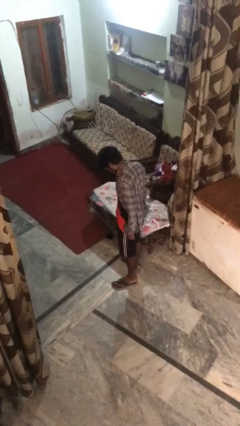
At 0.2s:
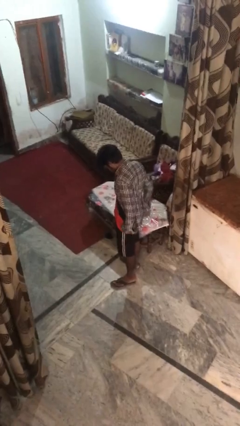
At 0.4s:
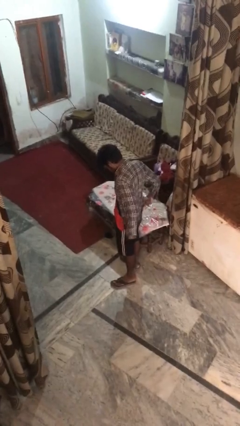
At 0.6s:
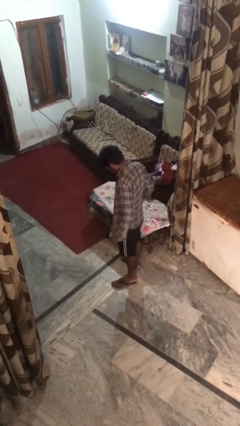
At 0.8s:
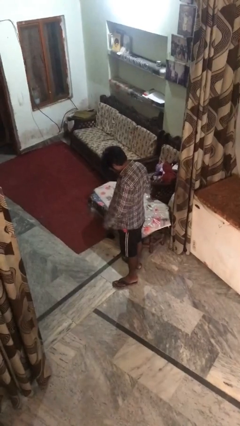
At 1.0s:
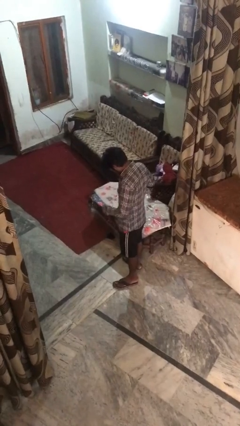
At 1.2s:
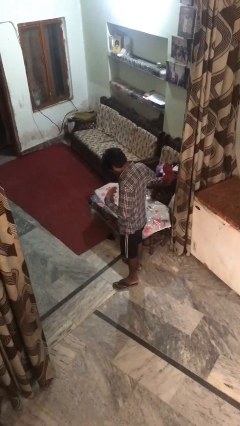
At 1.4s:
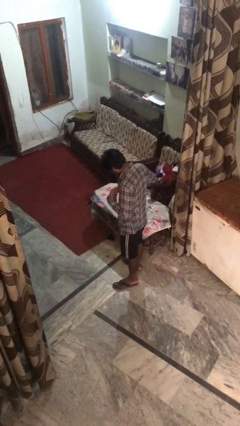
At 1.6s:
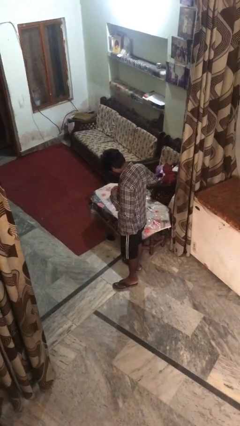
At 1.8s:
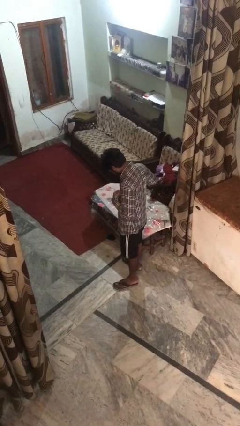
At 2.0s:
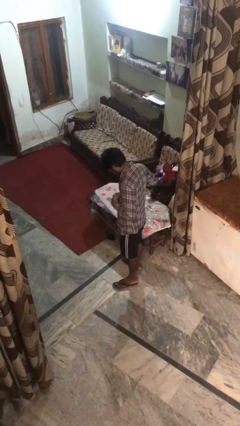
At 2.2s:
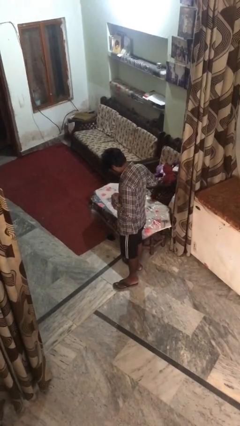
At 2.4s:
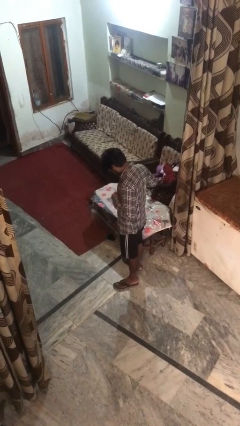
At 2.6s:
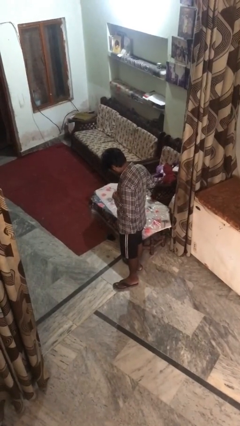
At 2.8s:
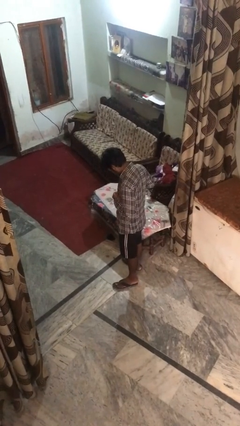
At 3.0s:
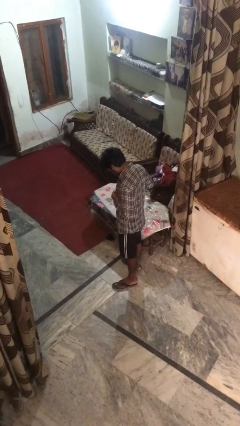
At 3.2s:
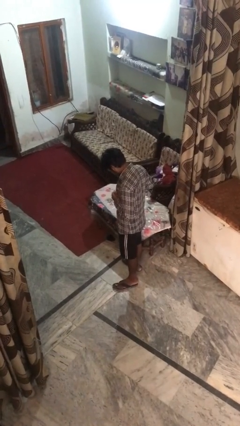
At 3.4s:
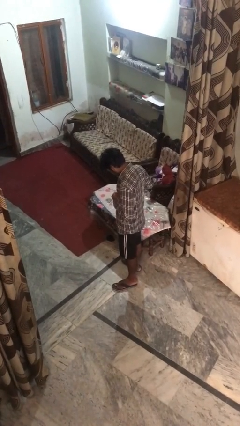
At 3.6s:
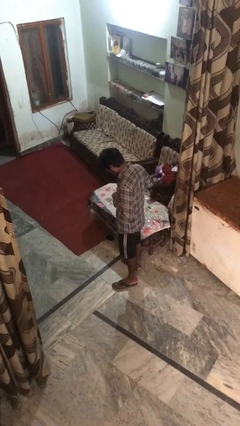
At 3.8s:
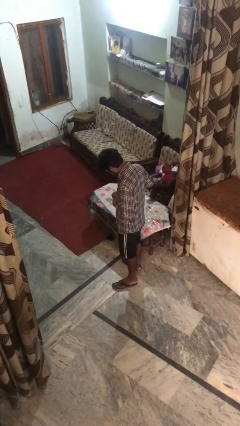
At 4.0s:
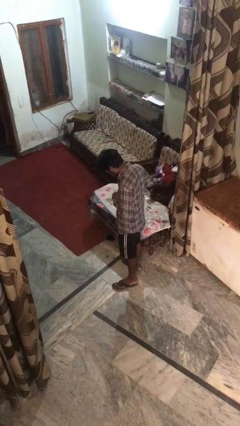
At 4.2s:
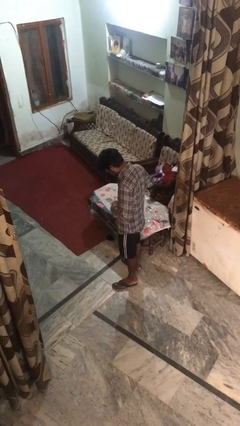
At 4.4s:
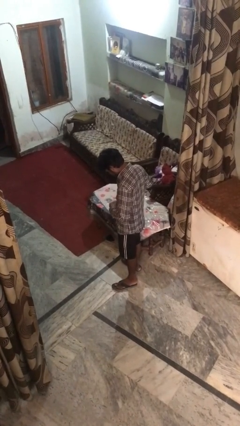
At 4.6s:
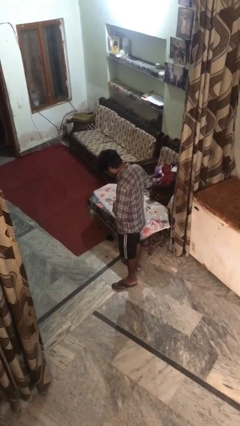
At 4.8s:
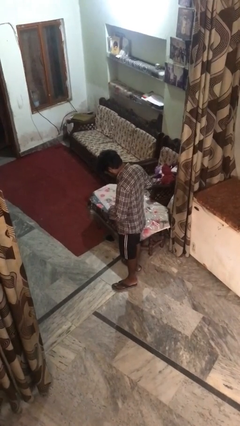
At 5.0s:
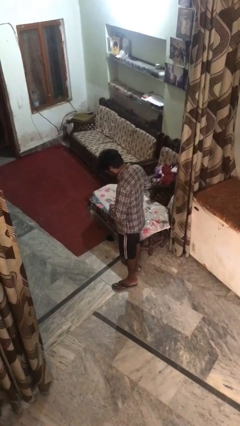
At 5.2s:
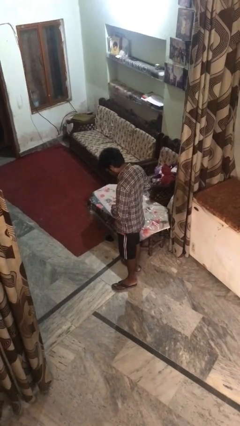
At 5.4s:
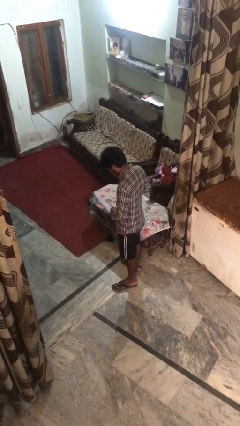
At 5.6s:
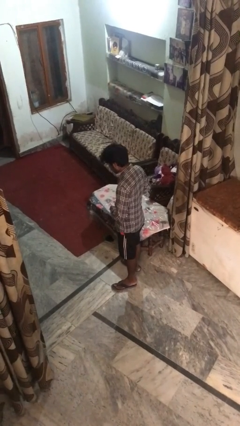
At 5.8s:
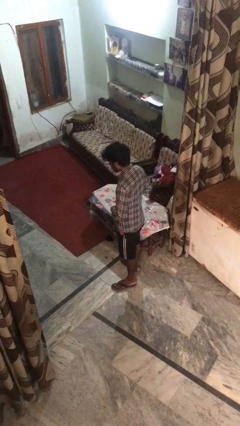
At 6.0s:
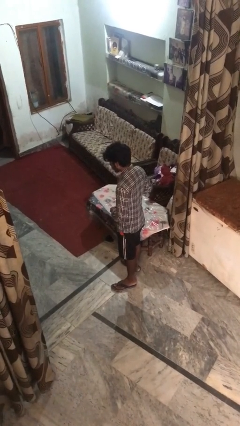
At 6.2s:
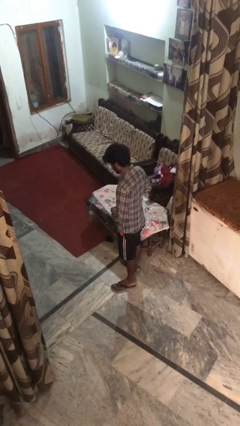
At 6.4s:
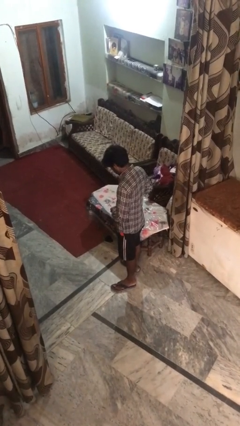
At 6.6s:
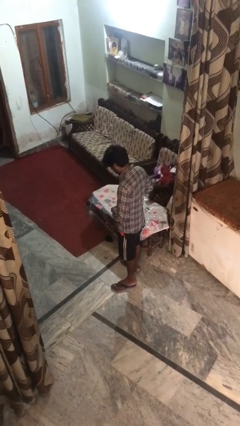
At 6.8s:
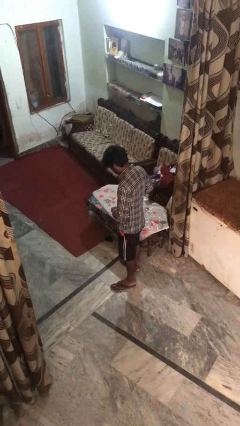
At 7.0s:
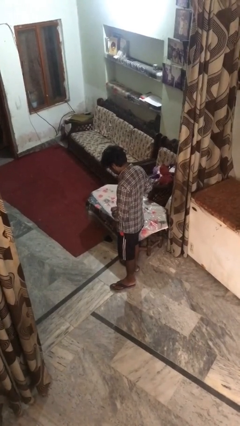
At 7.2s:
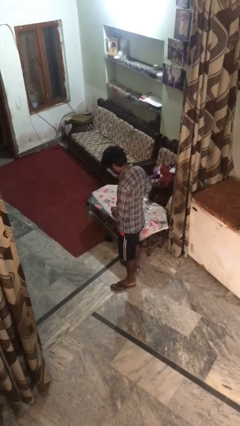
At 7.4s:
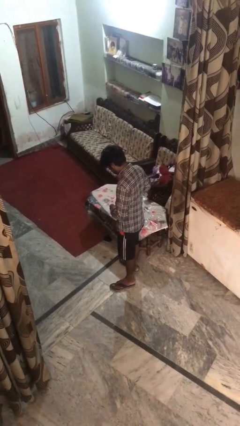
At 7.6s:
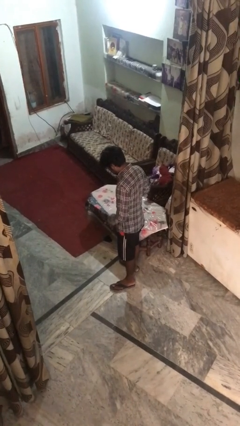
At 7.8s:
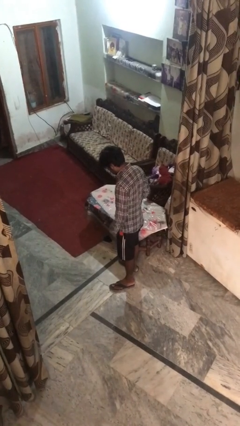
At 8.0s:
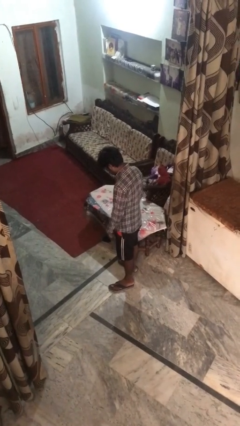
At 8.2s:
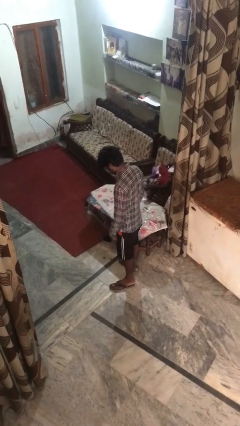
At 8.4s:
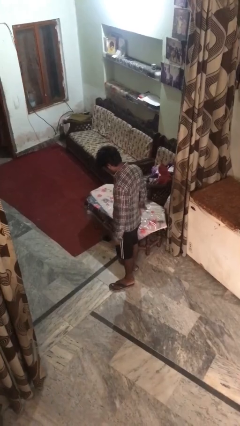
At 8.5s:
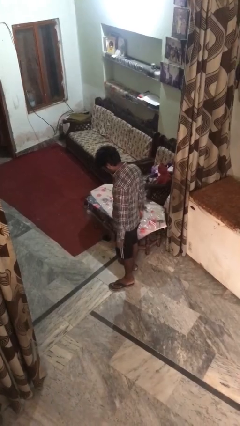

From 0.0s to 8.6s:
person buttons shirt

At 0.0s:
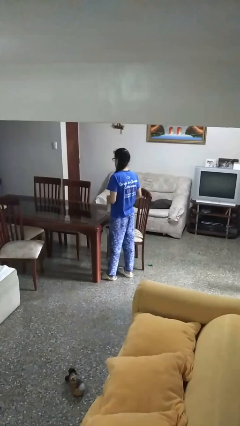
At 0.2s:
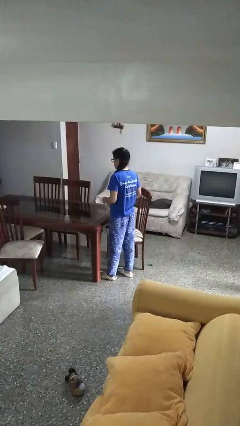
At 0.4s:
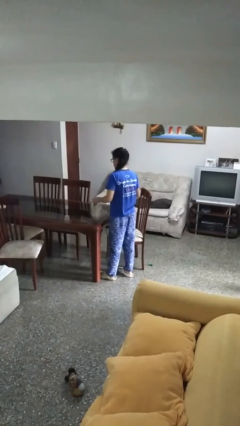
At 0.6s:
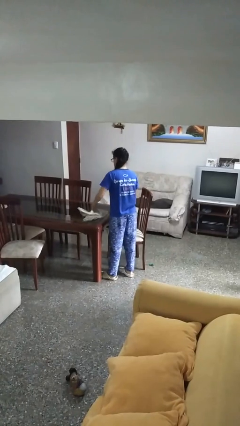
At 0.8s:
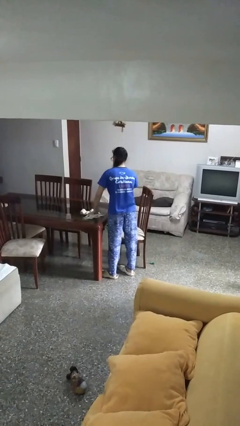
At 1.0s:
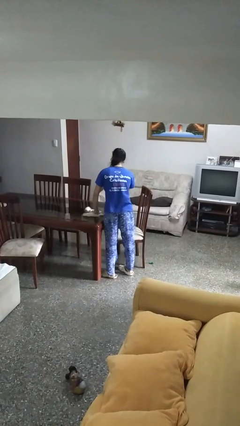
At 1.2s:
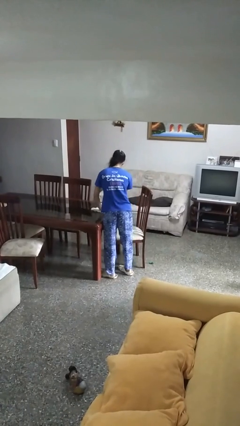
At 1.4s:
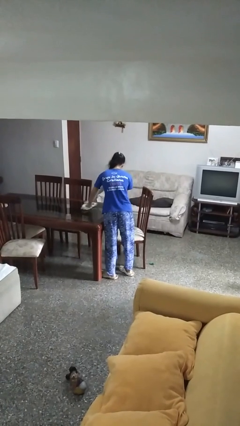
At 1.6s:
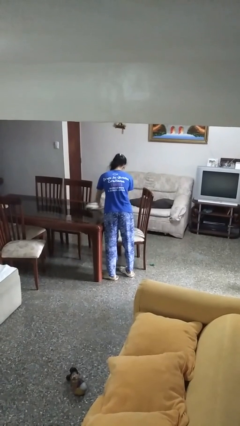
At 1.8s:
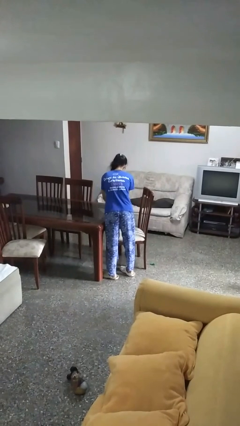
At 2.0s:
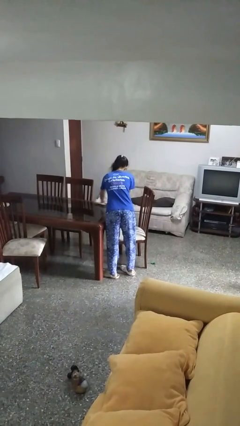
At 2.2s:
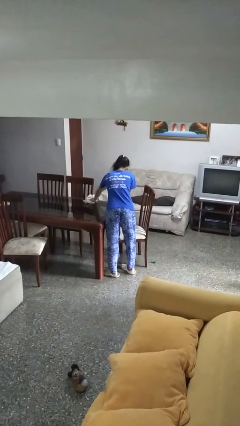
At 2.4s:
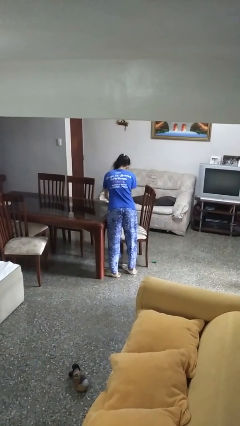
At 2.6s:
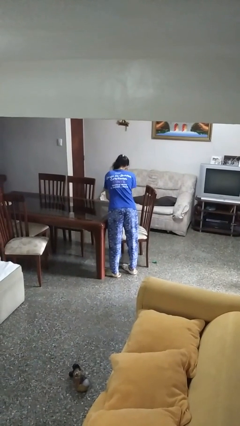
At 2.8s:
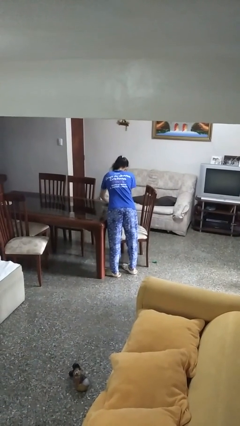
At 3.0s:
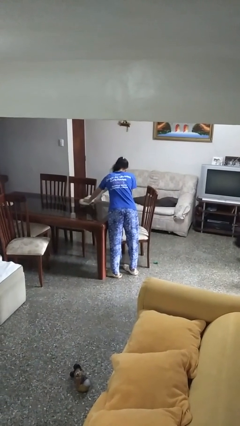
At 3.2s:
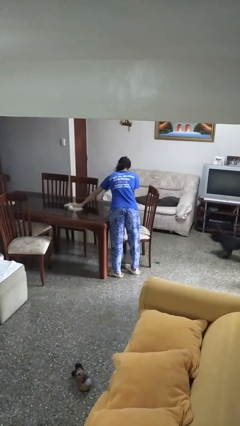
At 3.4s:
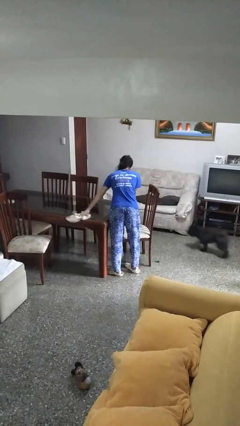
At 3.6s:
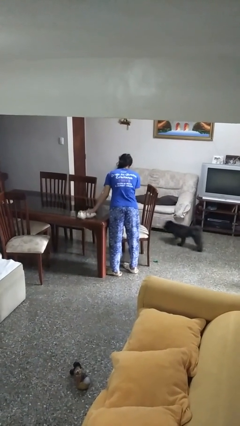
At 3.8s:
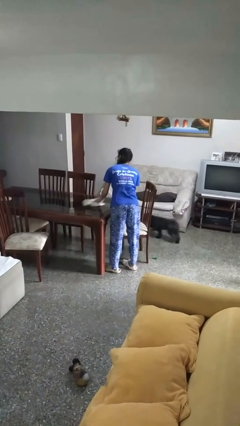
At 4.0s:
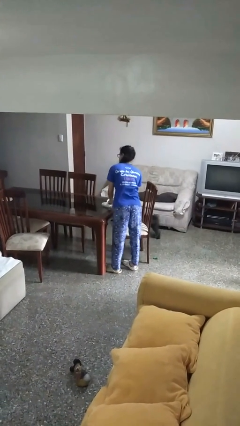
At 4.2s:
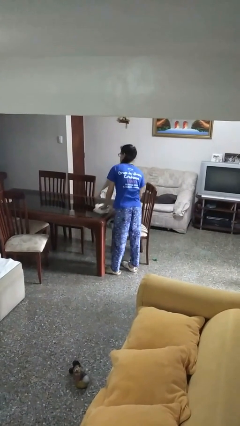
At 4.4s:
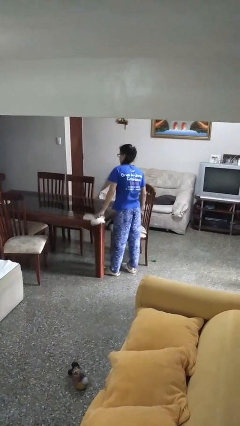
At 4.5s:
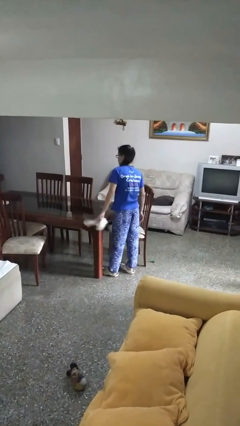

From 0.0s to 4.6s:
person cleans table with rag

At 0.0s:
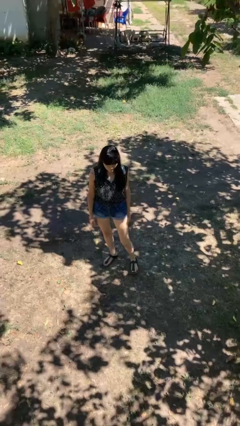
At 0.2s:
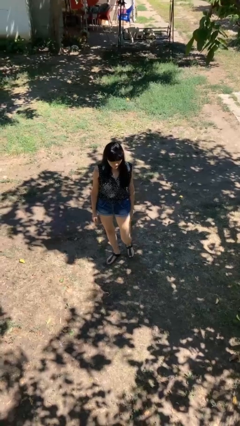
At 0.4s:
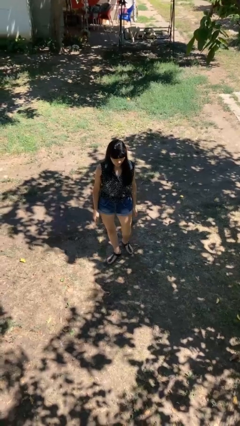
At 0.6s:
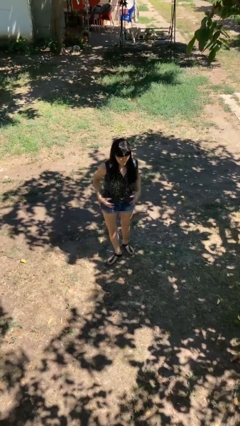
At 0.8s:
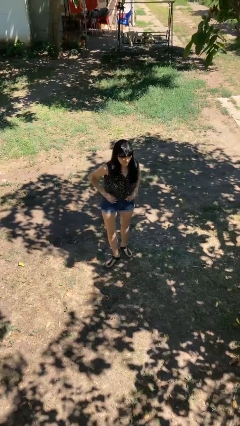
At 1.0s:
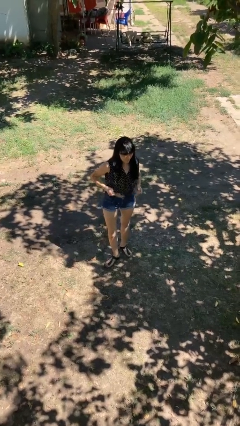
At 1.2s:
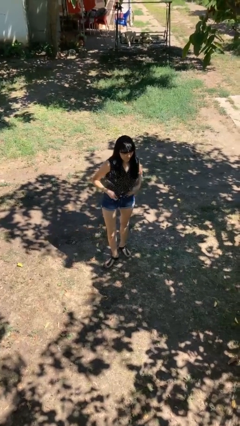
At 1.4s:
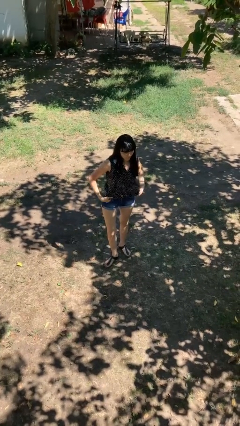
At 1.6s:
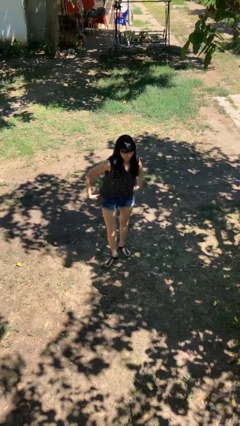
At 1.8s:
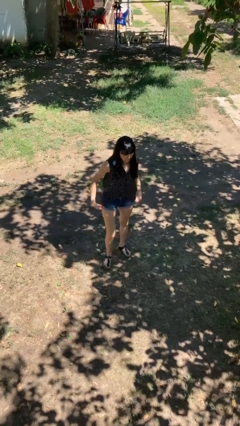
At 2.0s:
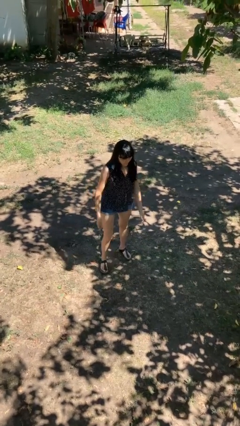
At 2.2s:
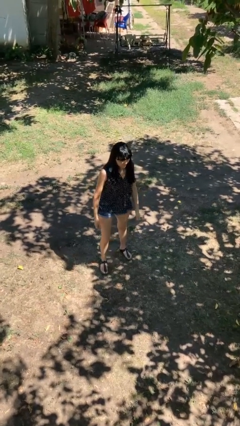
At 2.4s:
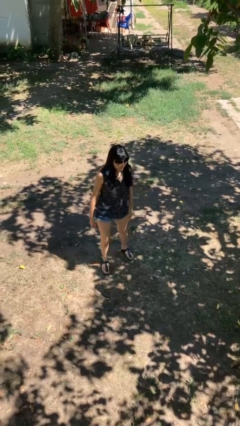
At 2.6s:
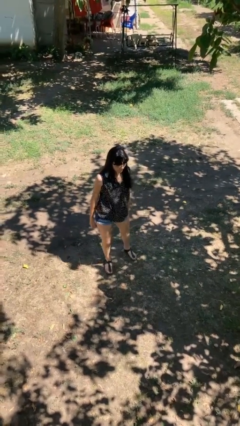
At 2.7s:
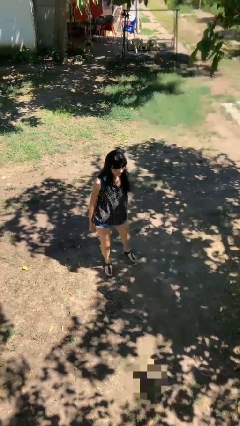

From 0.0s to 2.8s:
person untucks shirt

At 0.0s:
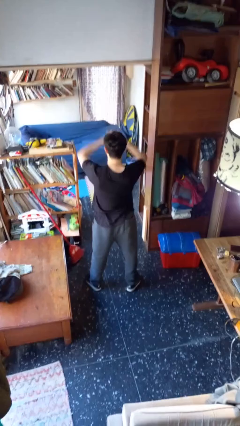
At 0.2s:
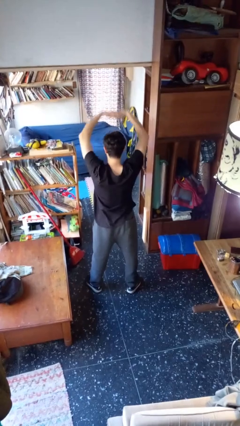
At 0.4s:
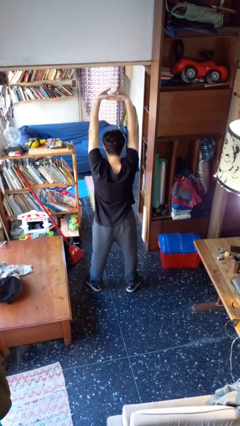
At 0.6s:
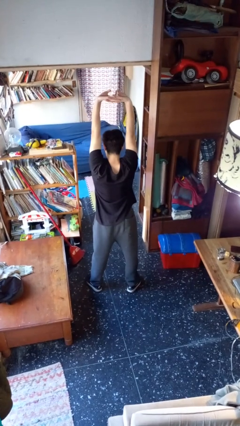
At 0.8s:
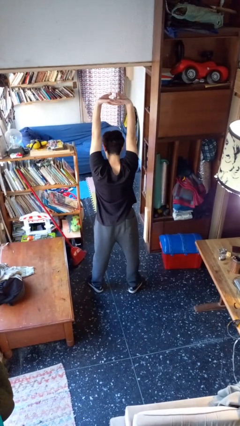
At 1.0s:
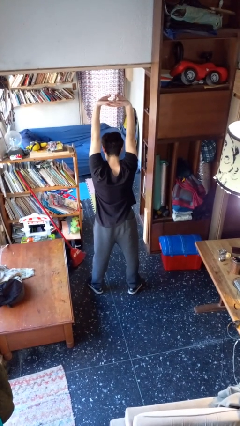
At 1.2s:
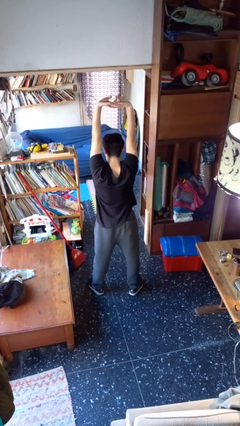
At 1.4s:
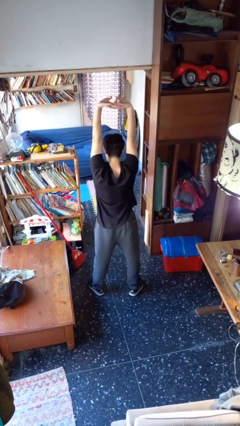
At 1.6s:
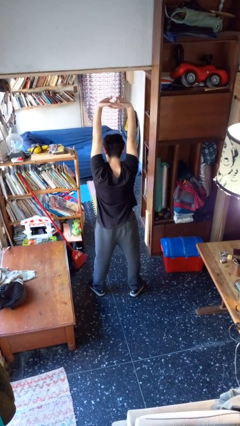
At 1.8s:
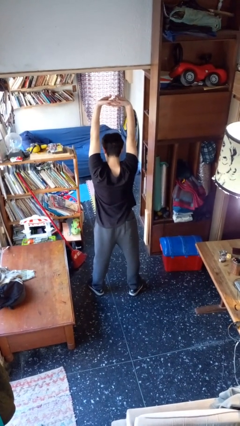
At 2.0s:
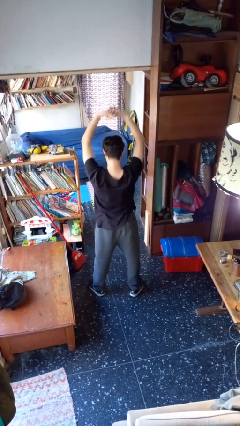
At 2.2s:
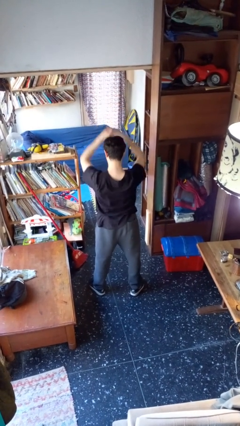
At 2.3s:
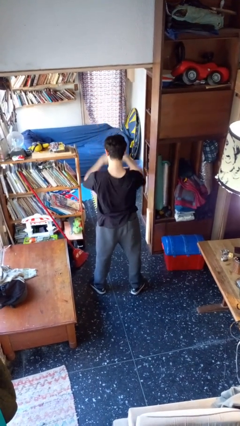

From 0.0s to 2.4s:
person stretches arms over head
